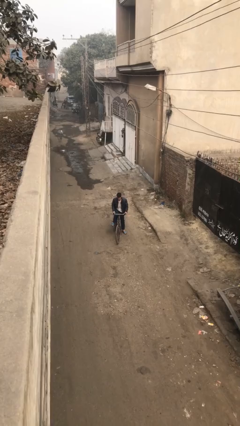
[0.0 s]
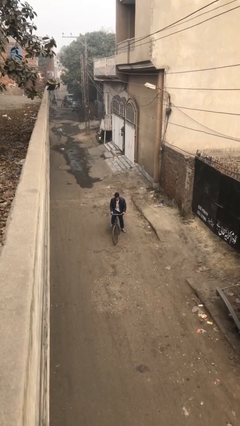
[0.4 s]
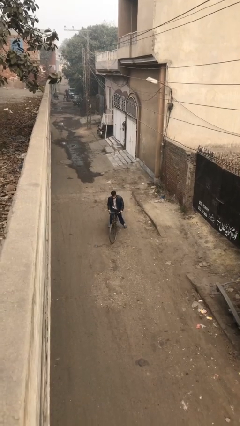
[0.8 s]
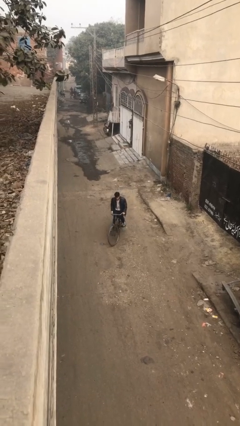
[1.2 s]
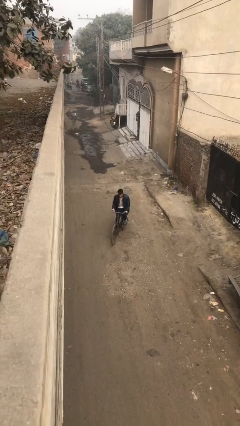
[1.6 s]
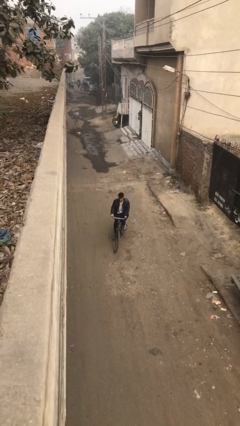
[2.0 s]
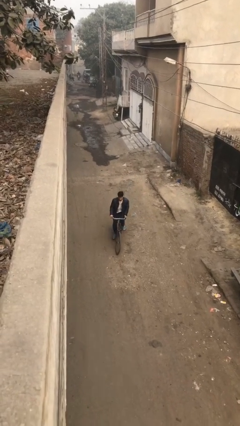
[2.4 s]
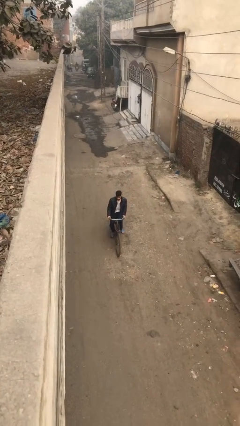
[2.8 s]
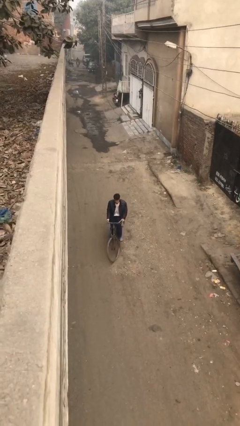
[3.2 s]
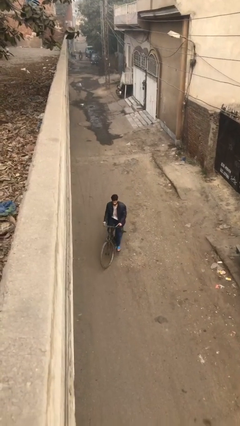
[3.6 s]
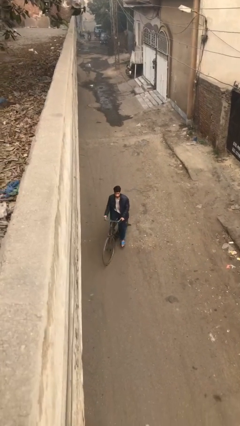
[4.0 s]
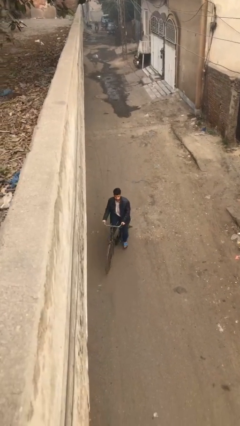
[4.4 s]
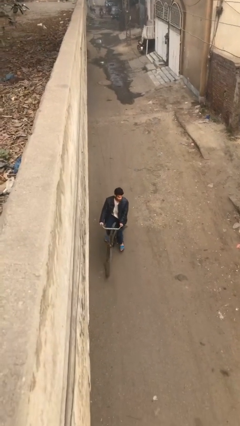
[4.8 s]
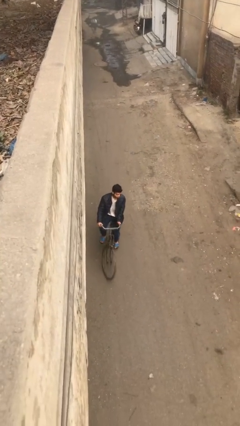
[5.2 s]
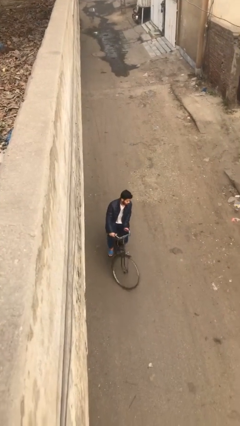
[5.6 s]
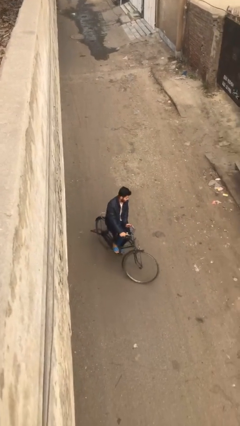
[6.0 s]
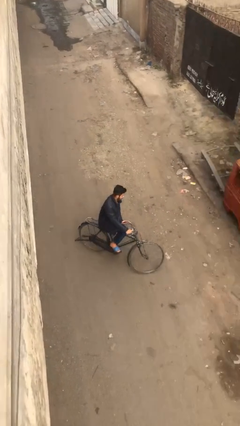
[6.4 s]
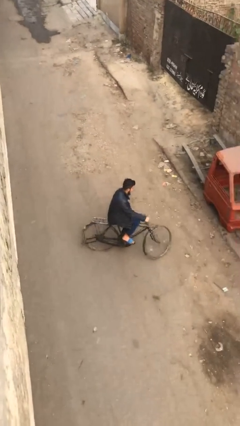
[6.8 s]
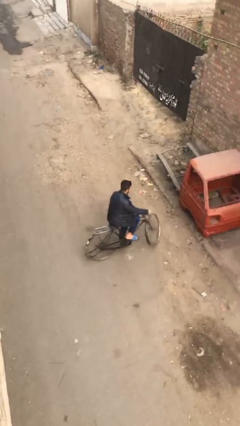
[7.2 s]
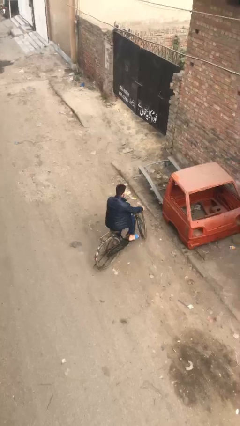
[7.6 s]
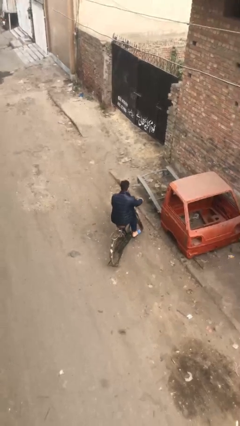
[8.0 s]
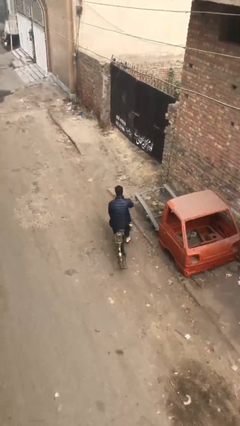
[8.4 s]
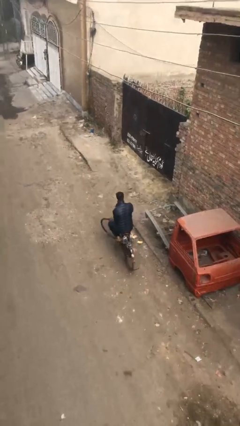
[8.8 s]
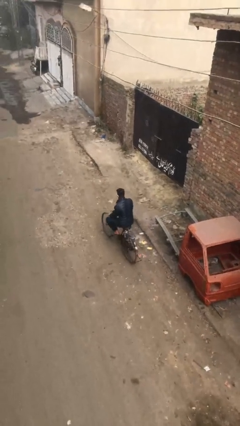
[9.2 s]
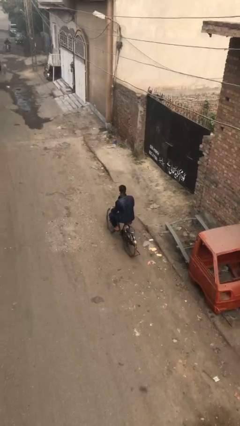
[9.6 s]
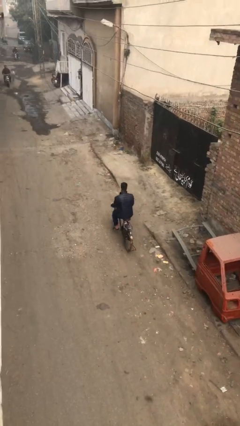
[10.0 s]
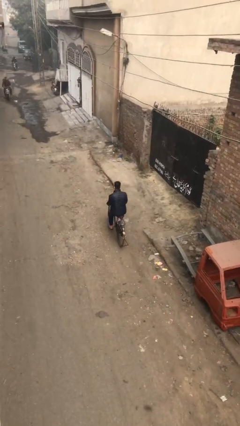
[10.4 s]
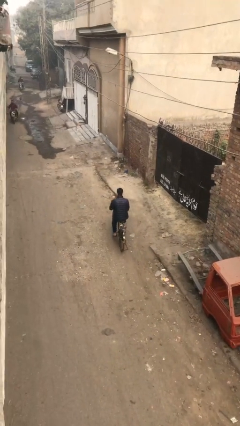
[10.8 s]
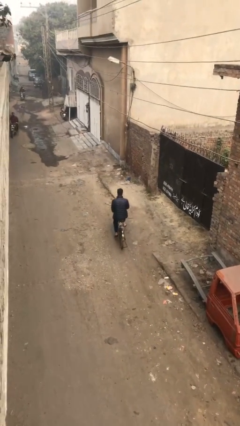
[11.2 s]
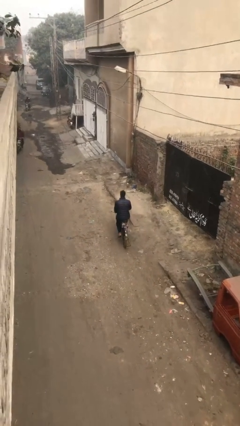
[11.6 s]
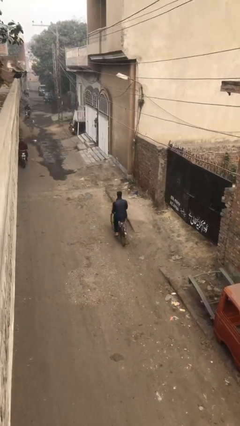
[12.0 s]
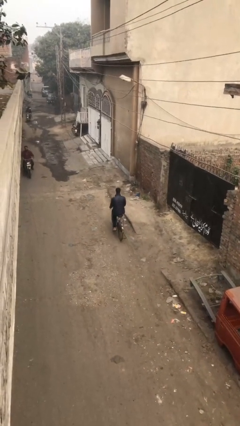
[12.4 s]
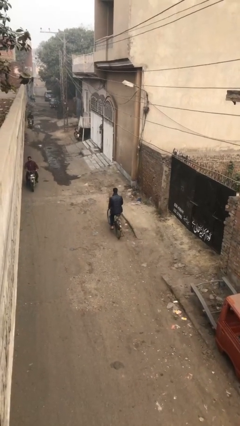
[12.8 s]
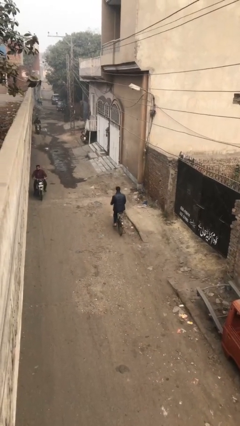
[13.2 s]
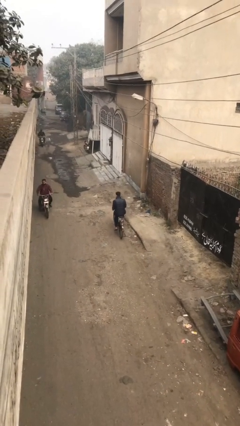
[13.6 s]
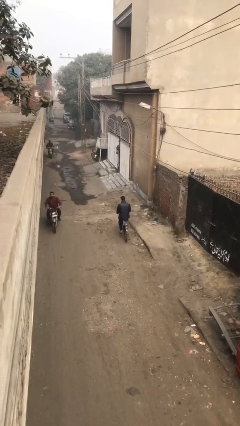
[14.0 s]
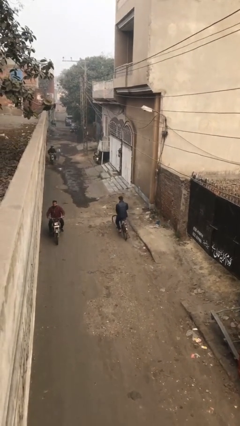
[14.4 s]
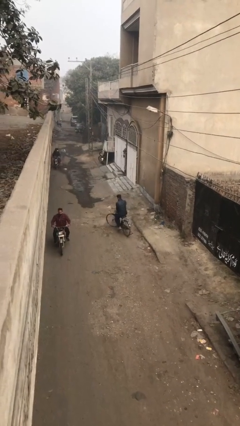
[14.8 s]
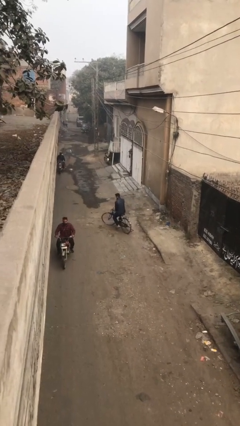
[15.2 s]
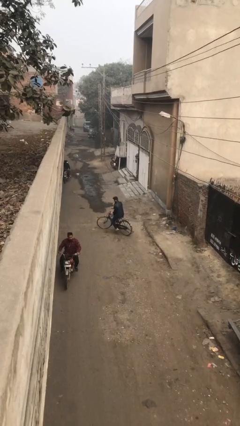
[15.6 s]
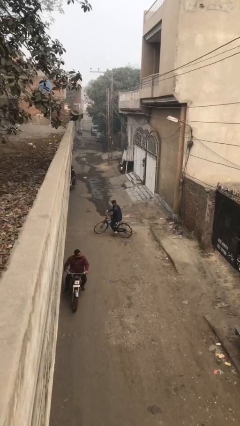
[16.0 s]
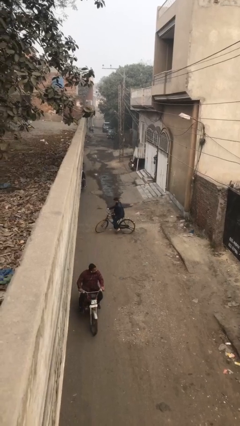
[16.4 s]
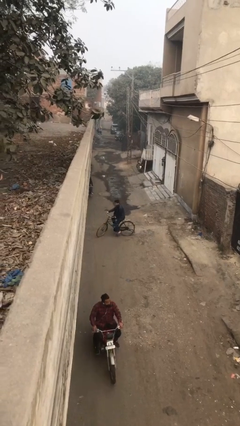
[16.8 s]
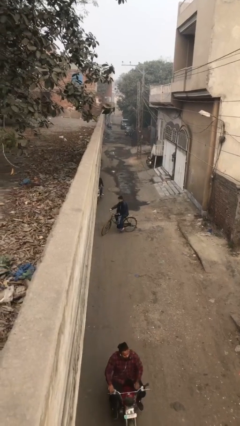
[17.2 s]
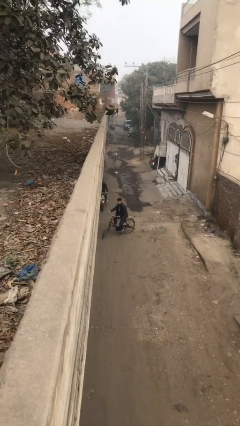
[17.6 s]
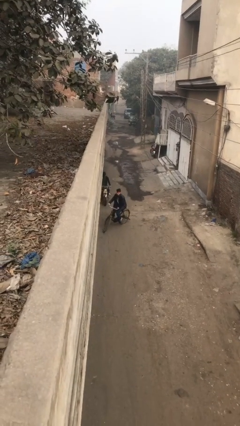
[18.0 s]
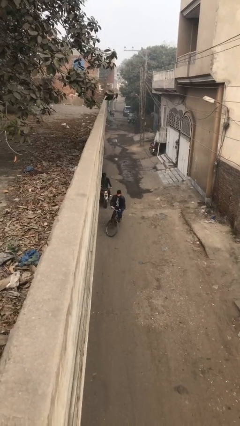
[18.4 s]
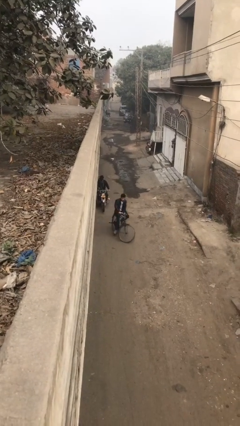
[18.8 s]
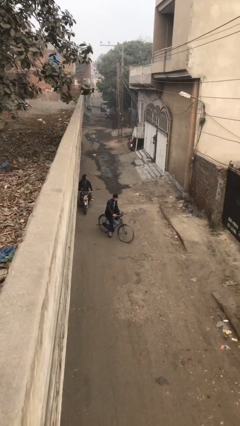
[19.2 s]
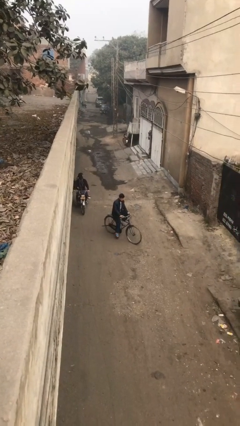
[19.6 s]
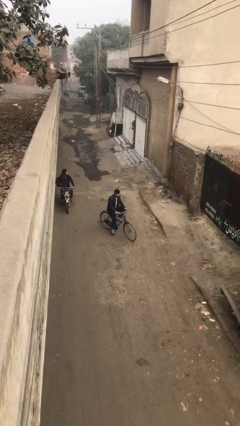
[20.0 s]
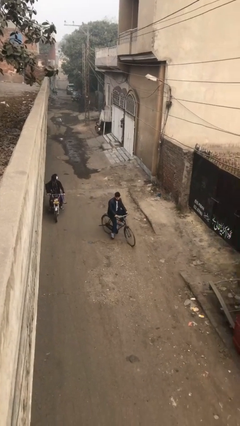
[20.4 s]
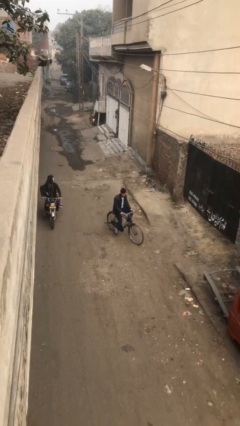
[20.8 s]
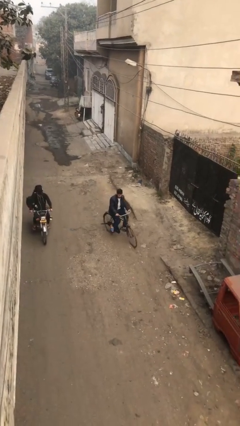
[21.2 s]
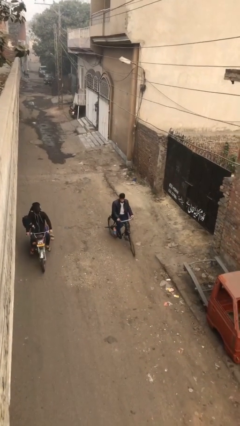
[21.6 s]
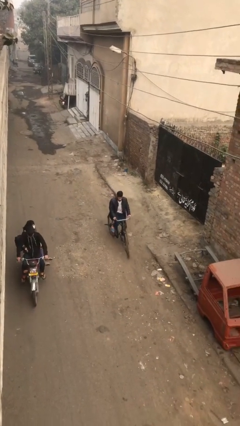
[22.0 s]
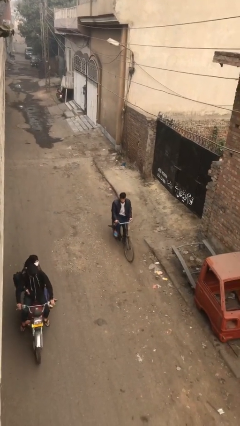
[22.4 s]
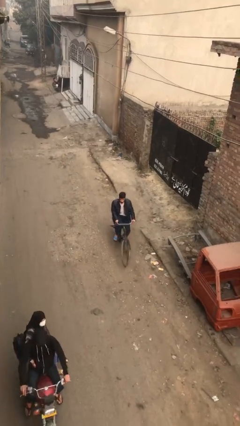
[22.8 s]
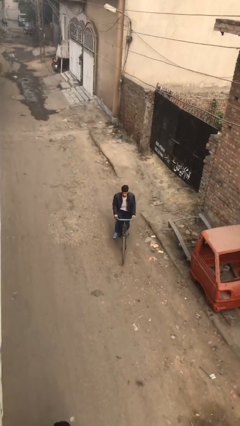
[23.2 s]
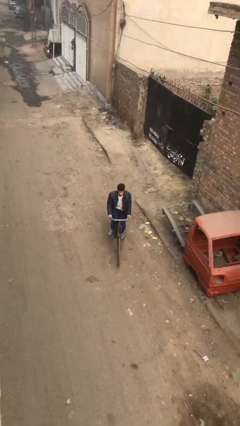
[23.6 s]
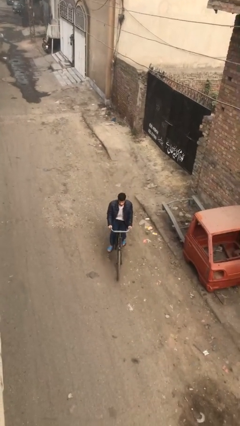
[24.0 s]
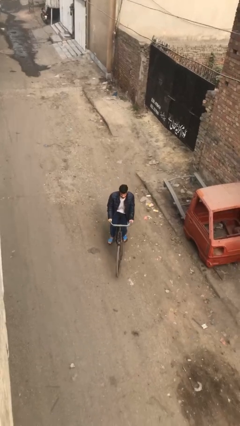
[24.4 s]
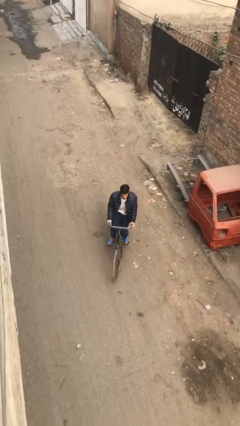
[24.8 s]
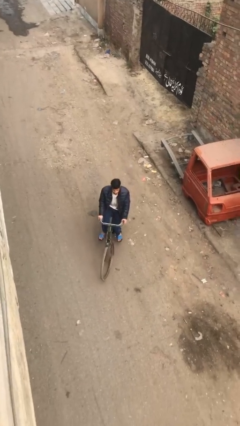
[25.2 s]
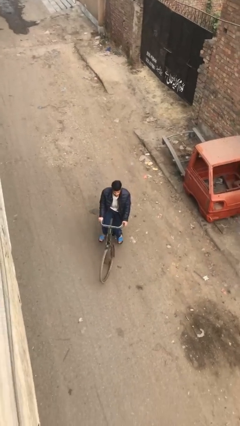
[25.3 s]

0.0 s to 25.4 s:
person rides bicycle

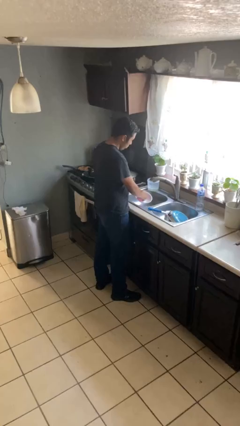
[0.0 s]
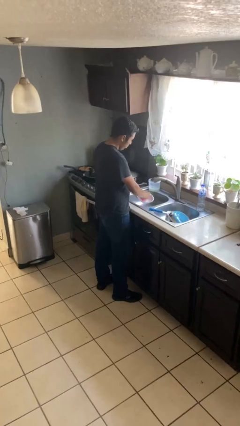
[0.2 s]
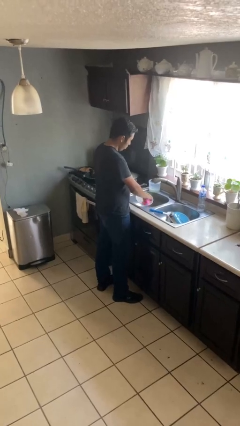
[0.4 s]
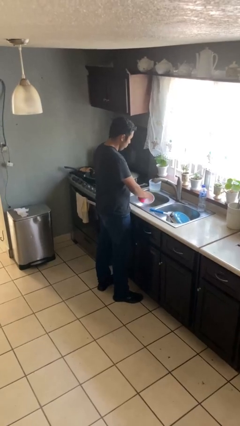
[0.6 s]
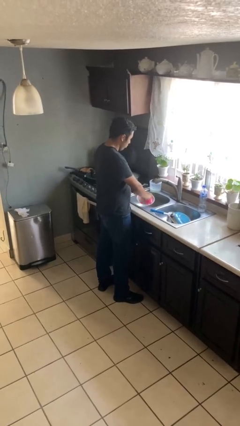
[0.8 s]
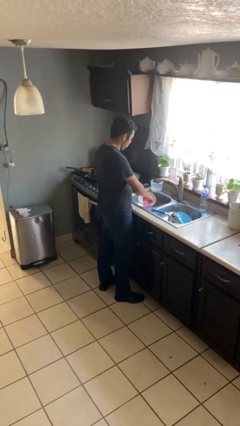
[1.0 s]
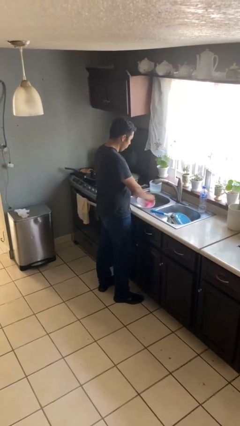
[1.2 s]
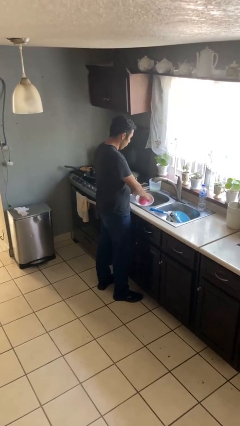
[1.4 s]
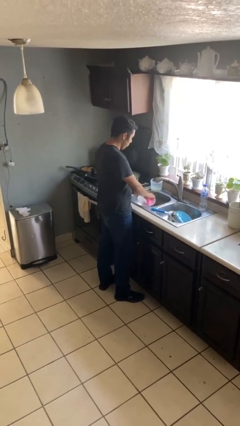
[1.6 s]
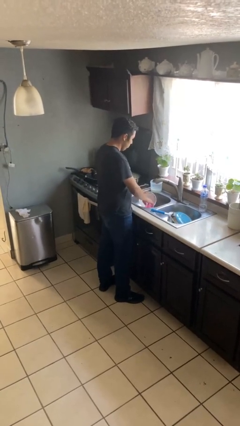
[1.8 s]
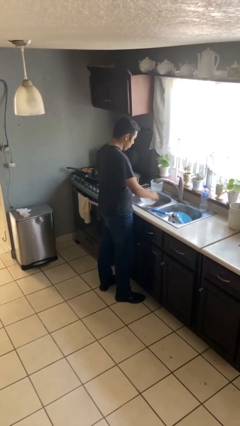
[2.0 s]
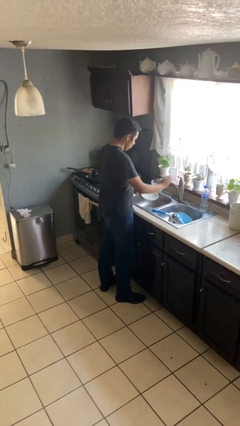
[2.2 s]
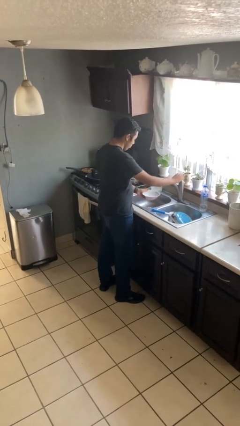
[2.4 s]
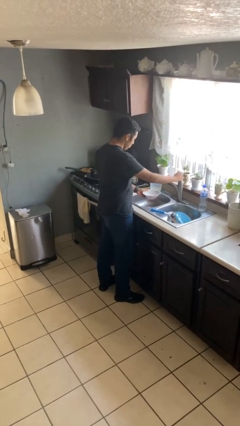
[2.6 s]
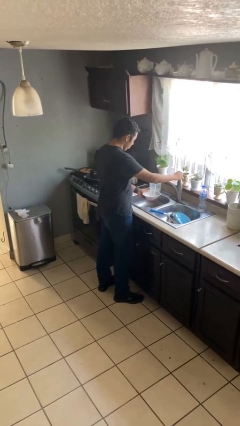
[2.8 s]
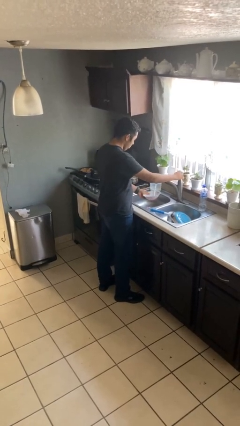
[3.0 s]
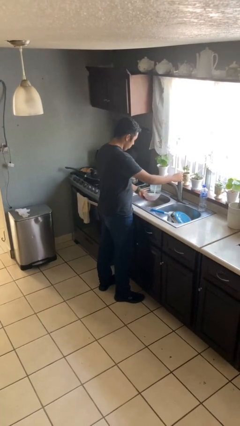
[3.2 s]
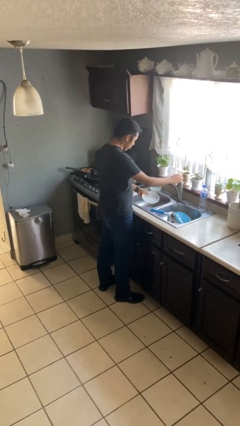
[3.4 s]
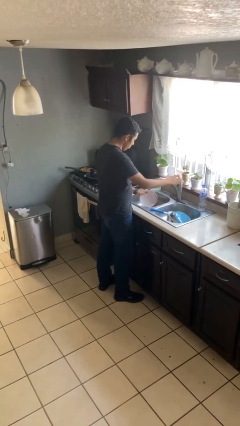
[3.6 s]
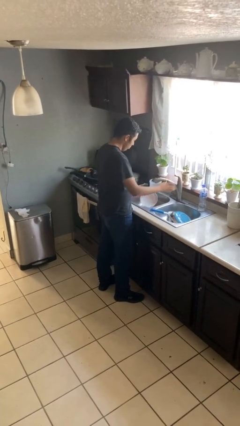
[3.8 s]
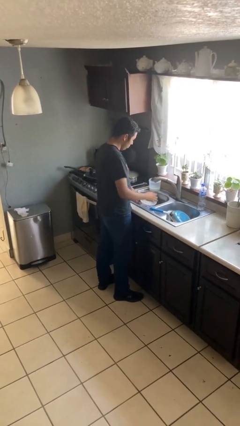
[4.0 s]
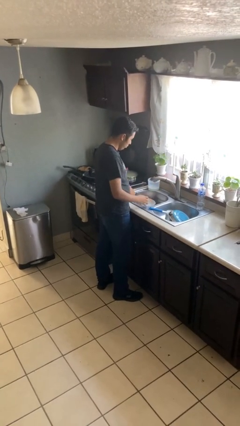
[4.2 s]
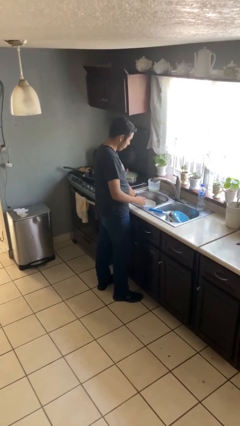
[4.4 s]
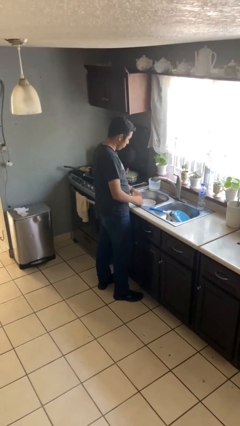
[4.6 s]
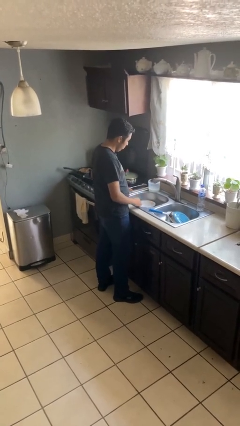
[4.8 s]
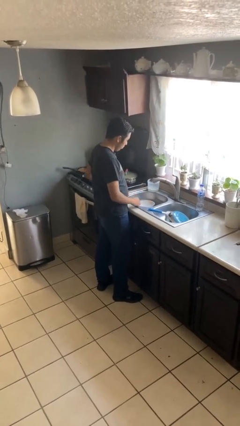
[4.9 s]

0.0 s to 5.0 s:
person washes dish

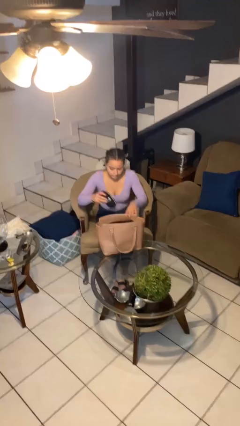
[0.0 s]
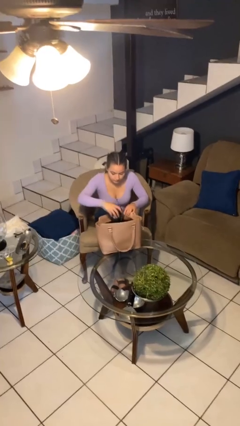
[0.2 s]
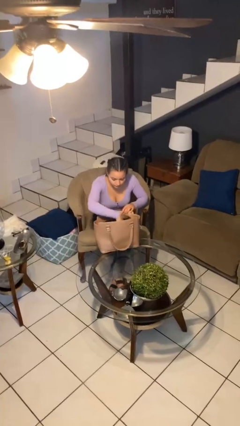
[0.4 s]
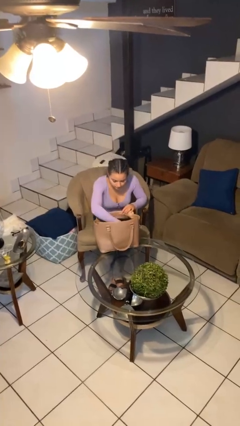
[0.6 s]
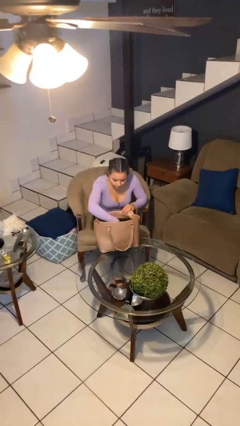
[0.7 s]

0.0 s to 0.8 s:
person puts object into purse
